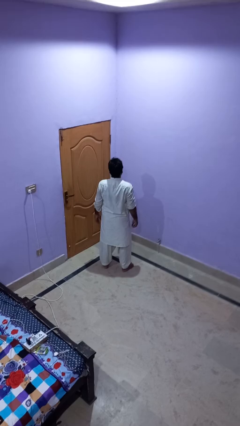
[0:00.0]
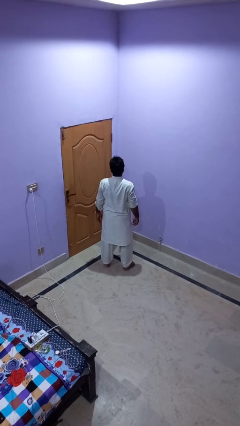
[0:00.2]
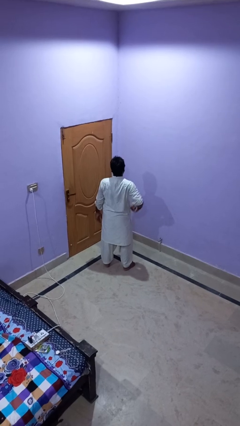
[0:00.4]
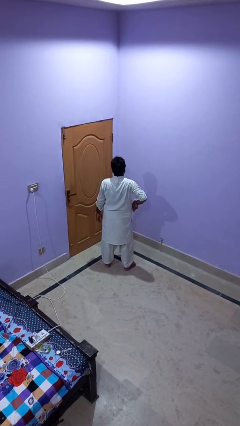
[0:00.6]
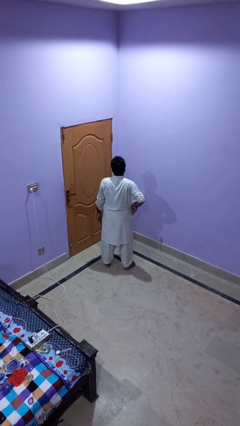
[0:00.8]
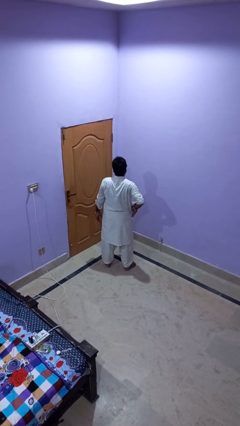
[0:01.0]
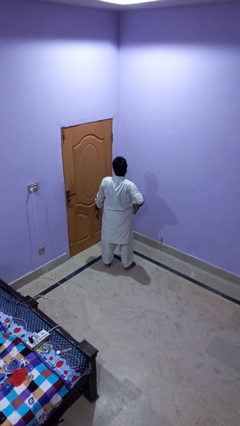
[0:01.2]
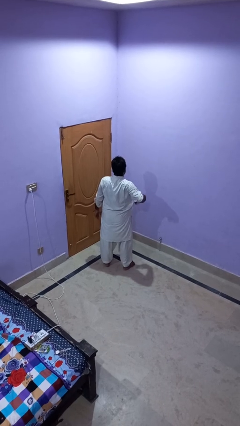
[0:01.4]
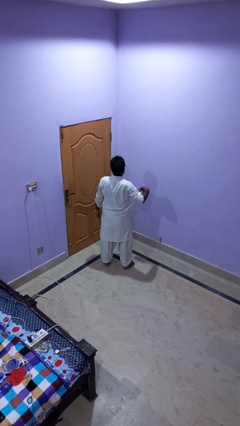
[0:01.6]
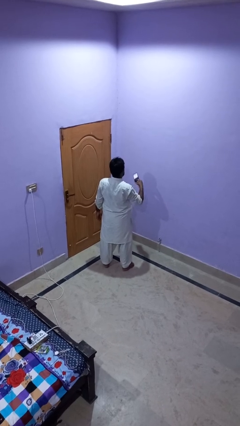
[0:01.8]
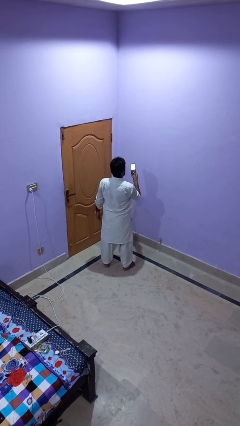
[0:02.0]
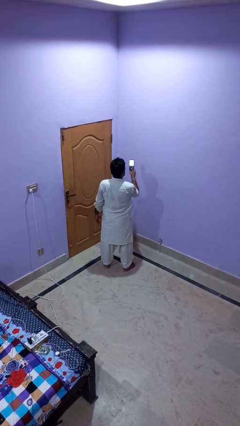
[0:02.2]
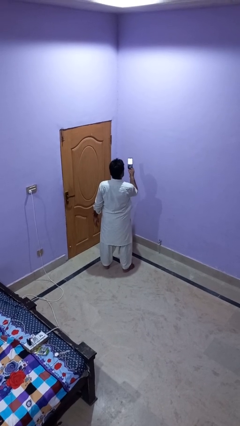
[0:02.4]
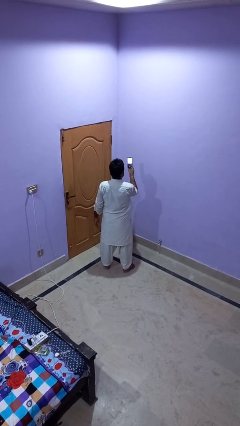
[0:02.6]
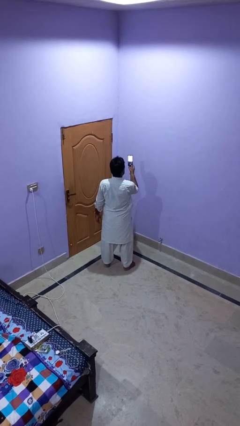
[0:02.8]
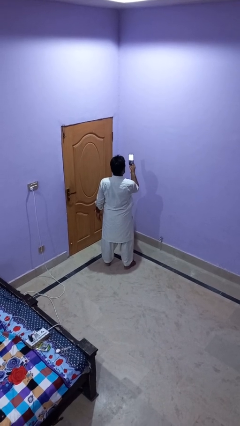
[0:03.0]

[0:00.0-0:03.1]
person takes phone from pocket

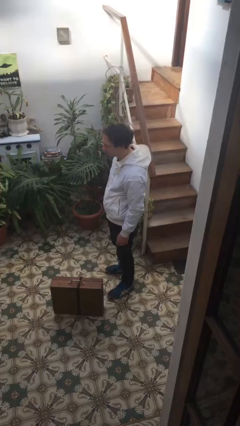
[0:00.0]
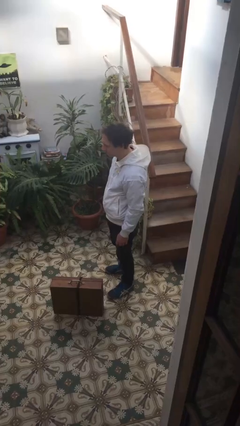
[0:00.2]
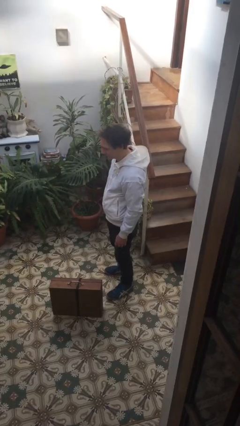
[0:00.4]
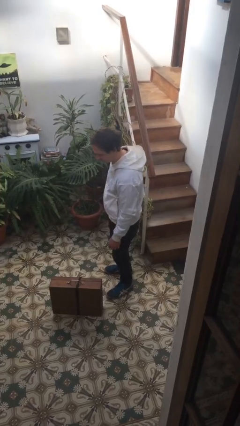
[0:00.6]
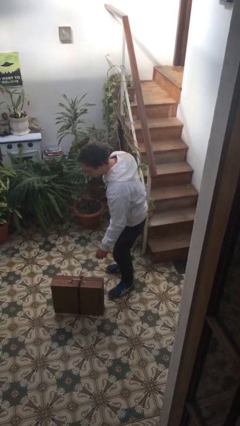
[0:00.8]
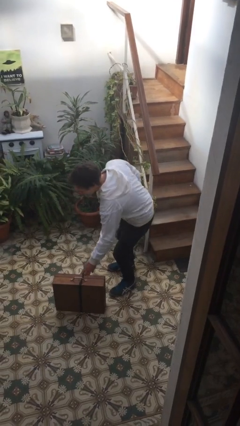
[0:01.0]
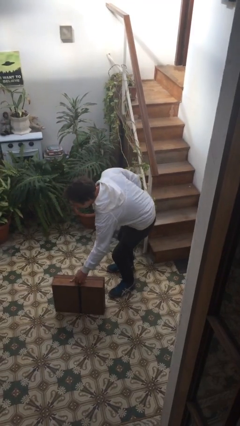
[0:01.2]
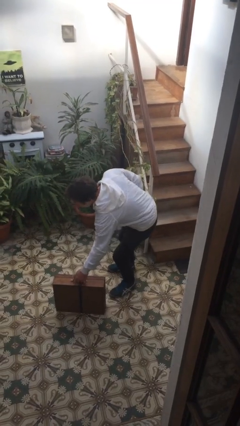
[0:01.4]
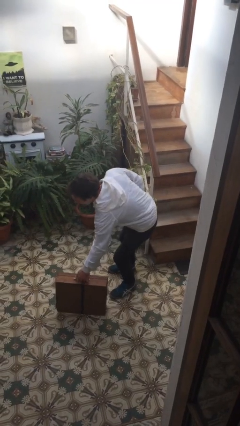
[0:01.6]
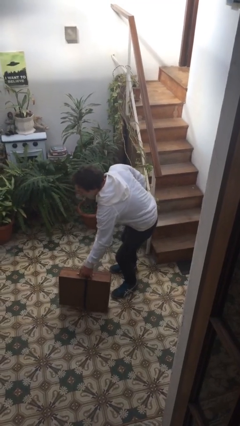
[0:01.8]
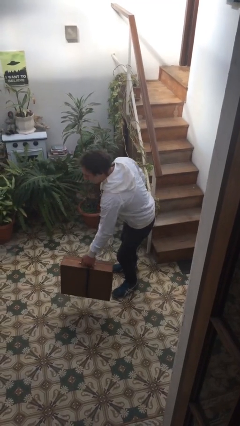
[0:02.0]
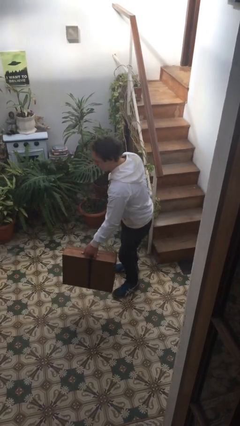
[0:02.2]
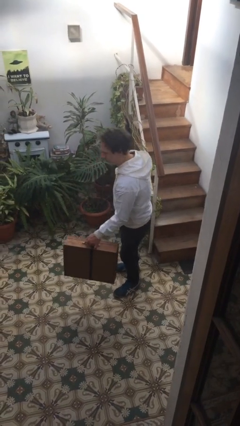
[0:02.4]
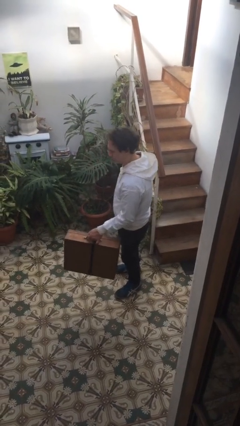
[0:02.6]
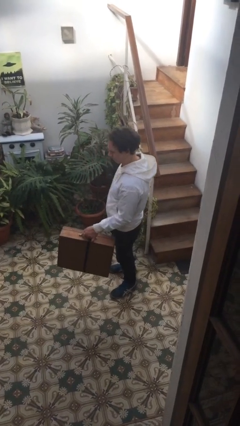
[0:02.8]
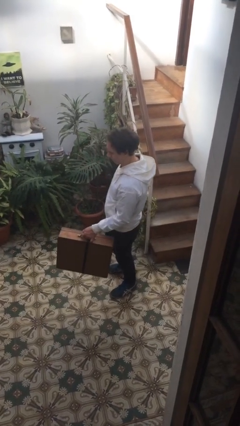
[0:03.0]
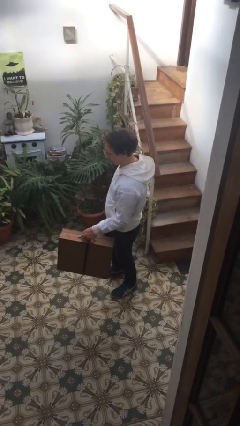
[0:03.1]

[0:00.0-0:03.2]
person picks up object from floor

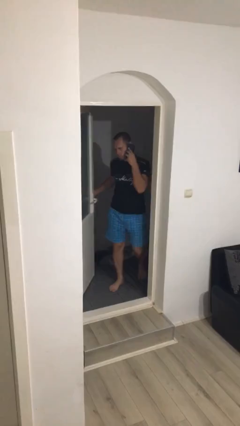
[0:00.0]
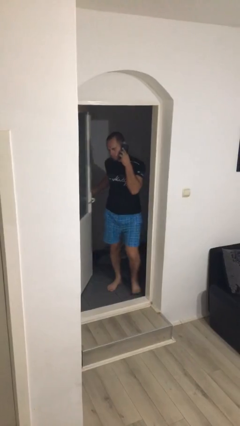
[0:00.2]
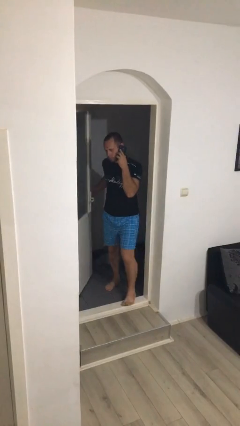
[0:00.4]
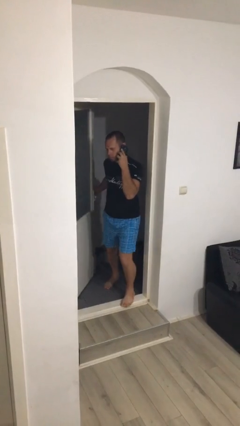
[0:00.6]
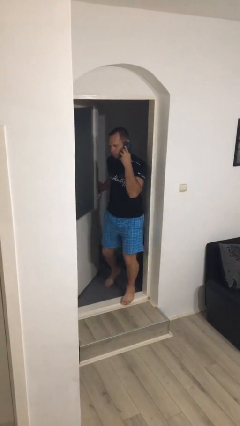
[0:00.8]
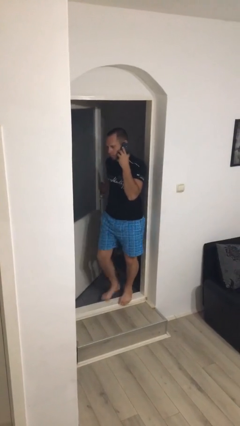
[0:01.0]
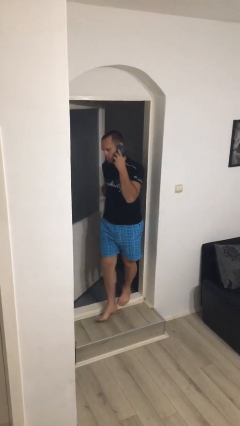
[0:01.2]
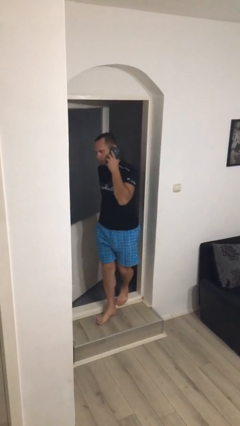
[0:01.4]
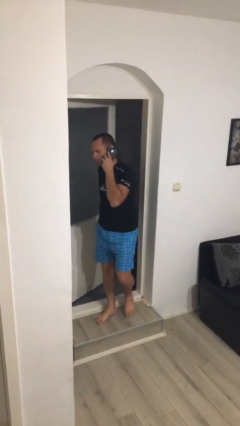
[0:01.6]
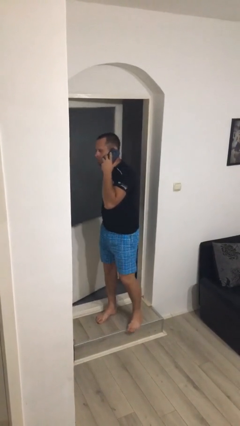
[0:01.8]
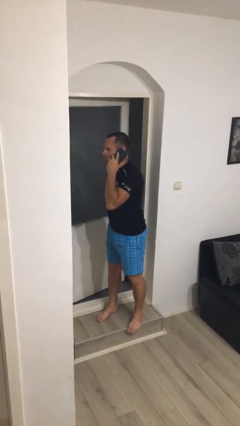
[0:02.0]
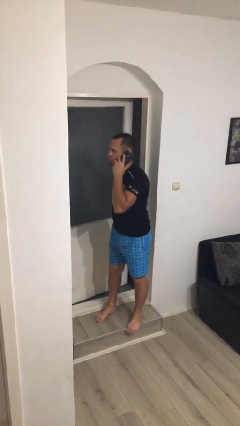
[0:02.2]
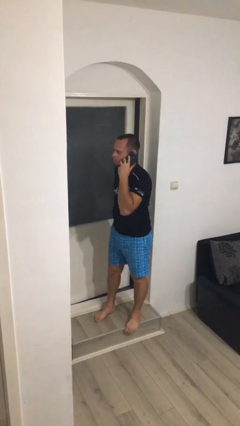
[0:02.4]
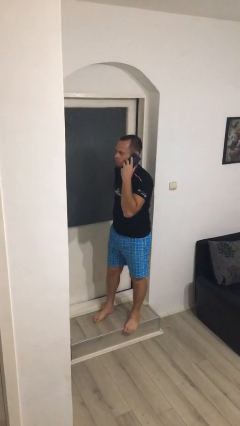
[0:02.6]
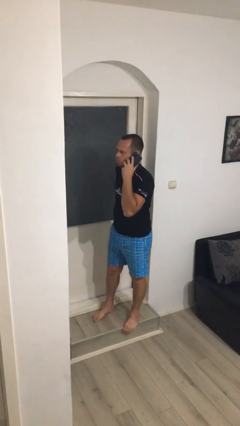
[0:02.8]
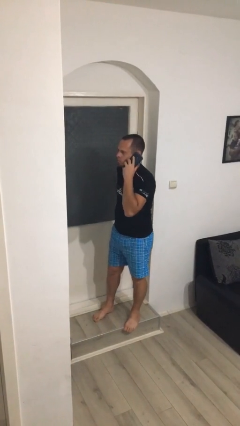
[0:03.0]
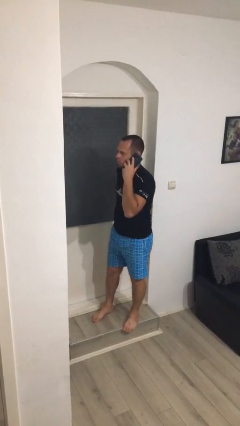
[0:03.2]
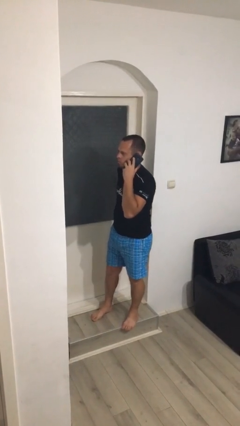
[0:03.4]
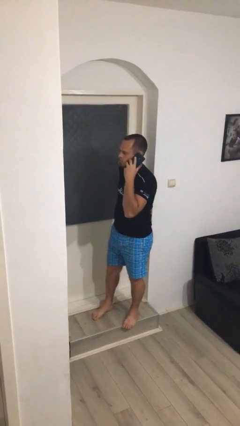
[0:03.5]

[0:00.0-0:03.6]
person enters scene through structure

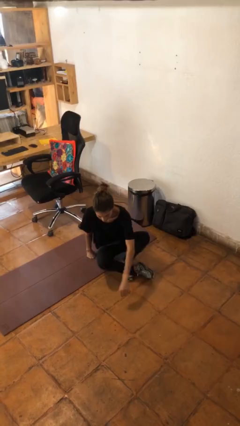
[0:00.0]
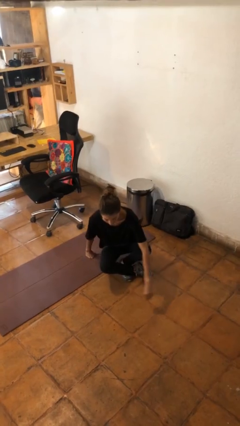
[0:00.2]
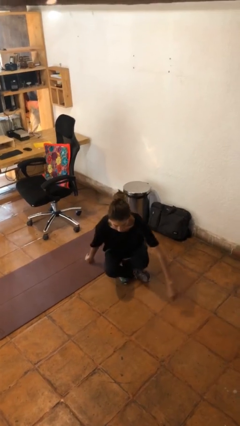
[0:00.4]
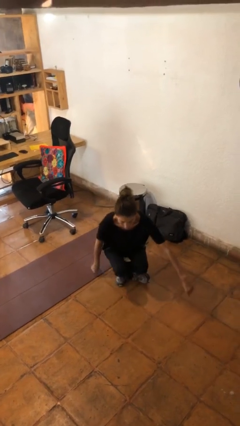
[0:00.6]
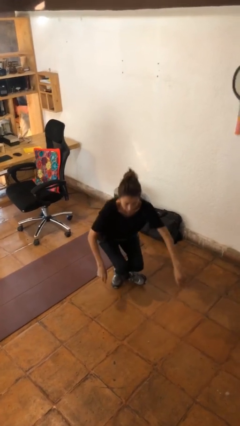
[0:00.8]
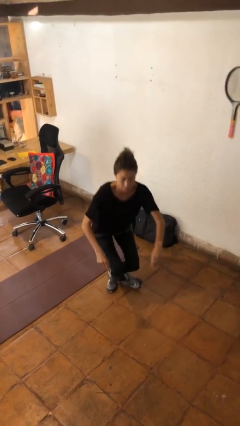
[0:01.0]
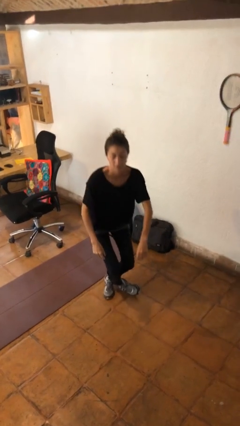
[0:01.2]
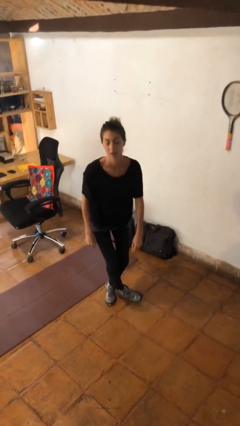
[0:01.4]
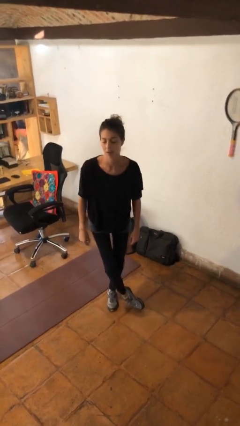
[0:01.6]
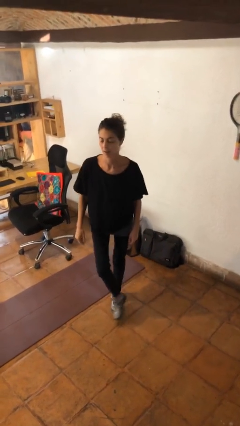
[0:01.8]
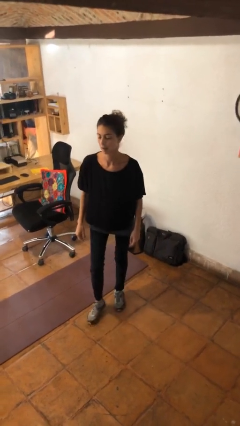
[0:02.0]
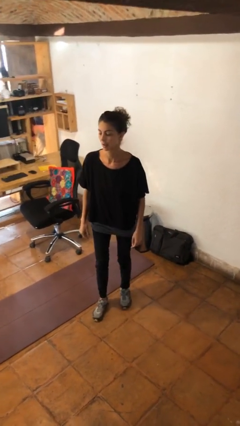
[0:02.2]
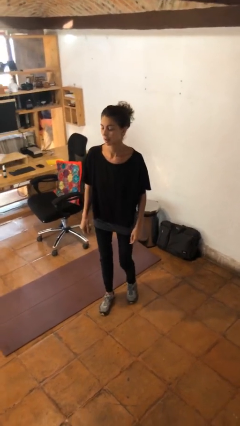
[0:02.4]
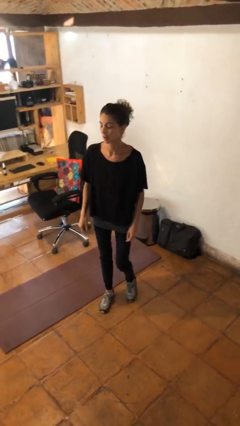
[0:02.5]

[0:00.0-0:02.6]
person stands up from floor

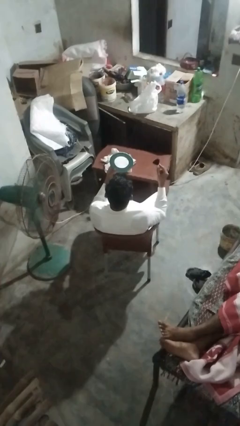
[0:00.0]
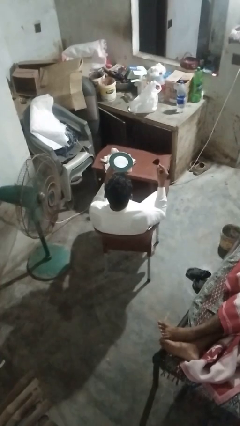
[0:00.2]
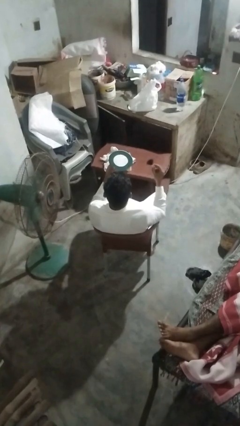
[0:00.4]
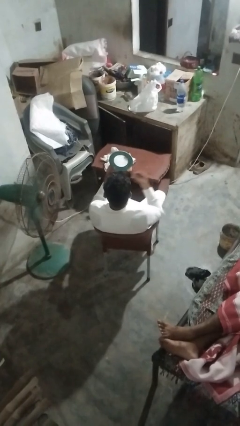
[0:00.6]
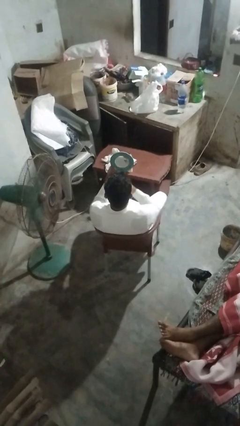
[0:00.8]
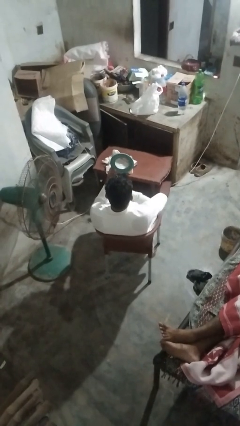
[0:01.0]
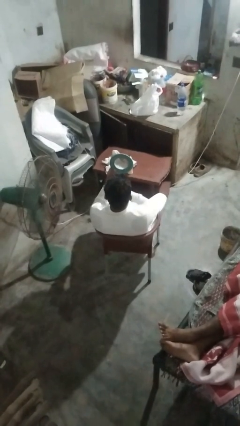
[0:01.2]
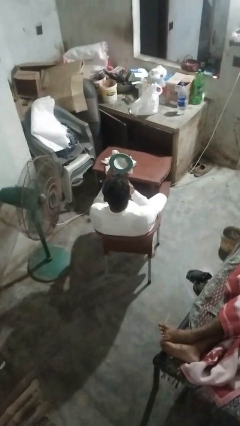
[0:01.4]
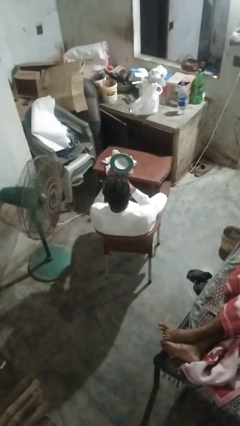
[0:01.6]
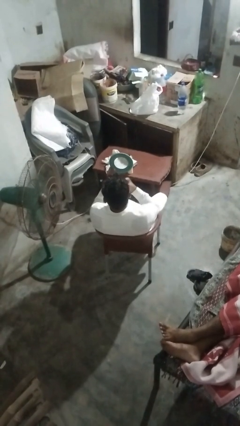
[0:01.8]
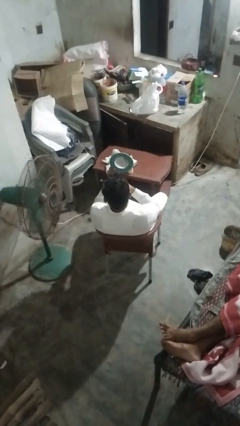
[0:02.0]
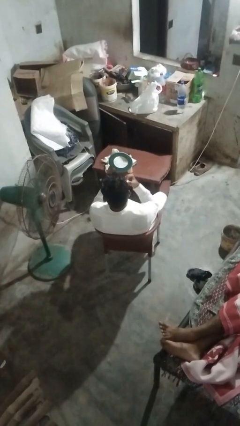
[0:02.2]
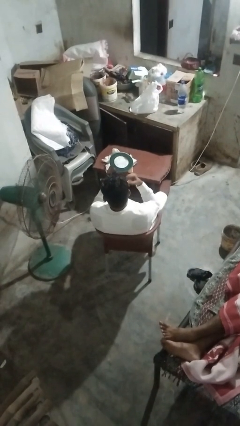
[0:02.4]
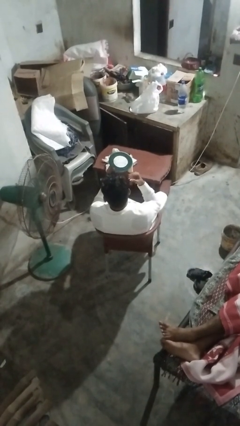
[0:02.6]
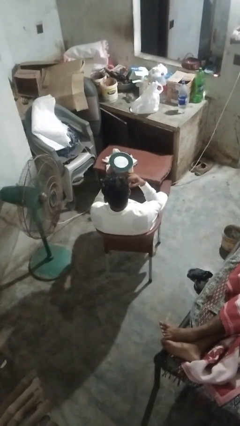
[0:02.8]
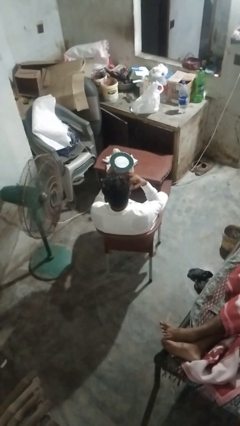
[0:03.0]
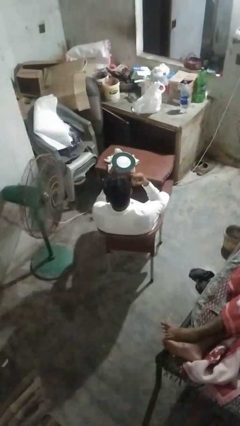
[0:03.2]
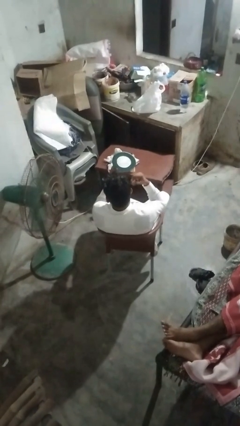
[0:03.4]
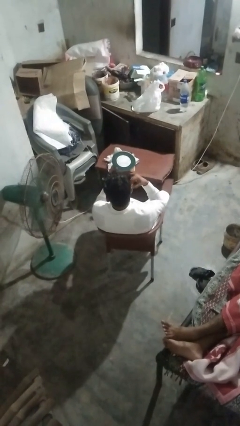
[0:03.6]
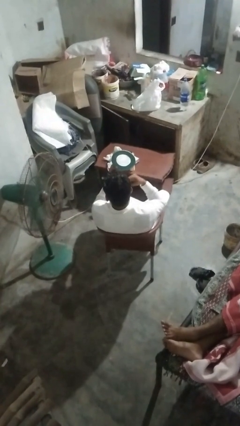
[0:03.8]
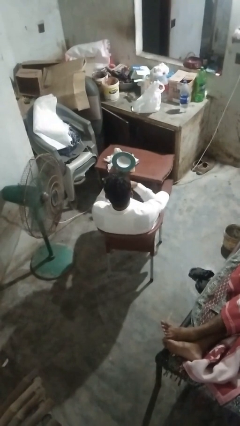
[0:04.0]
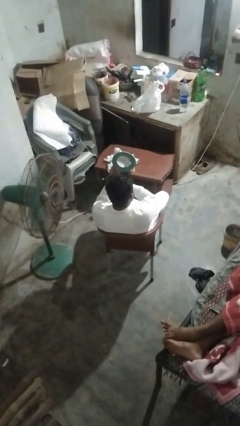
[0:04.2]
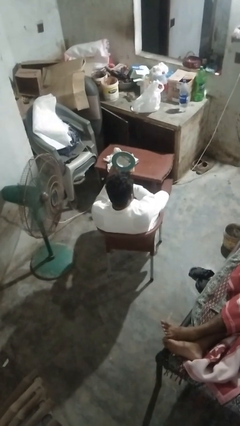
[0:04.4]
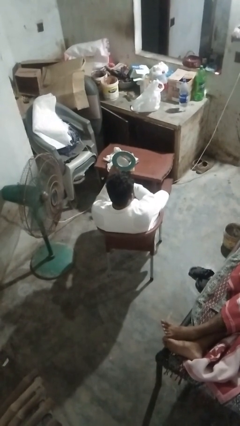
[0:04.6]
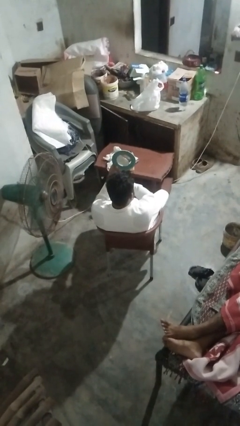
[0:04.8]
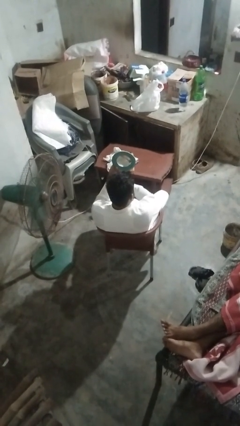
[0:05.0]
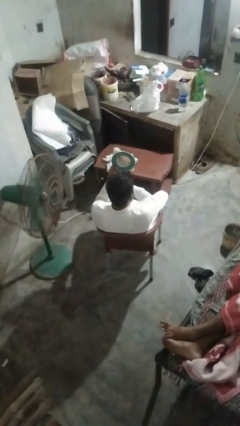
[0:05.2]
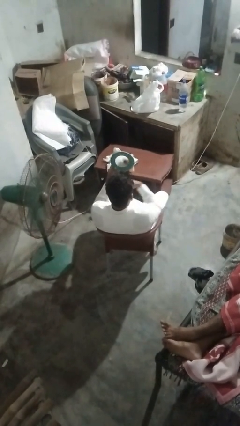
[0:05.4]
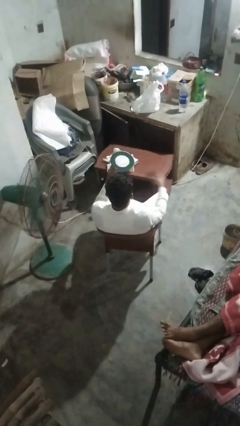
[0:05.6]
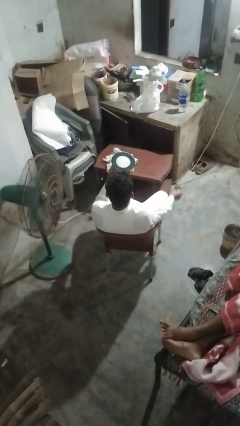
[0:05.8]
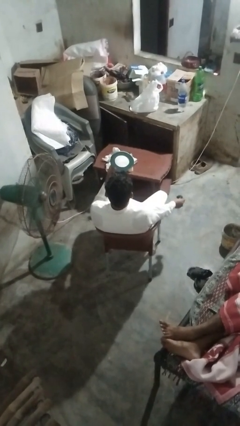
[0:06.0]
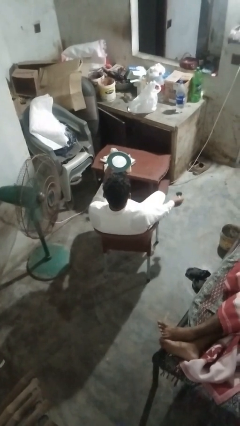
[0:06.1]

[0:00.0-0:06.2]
person applies foundation makeup
